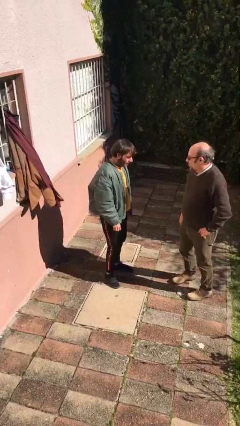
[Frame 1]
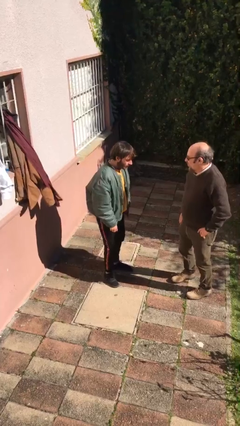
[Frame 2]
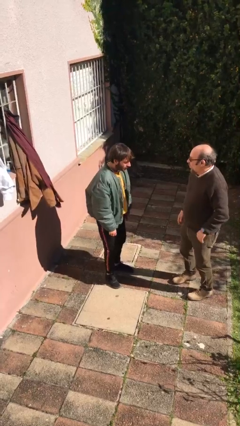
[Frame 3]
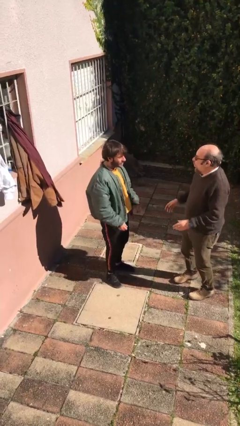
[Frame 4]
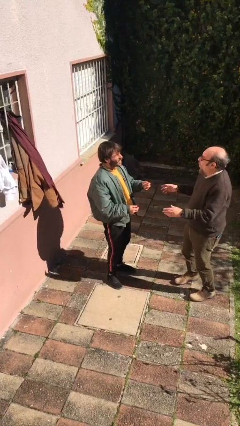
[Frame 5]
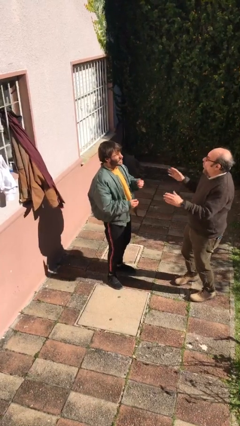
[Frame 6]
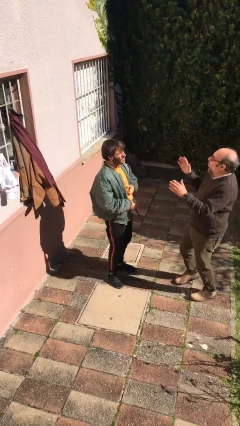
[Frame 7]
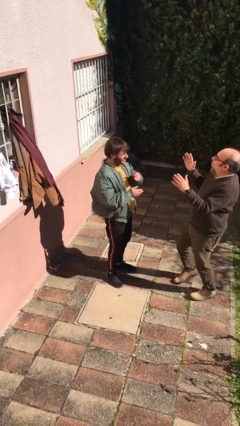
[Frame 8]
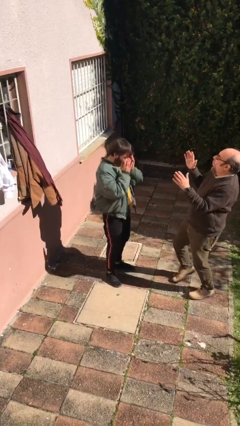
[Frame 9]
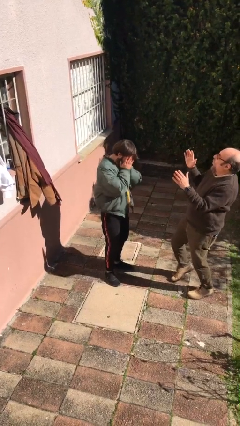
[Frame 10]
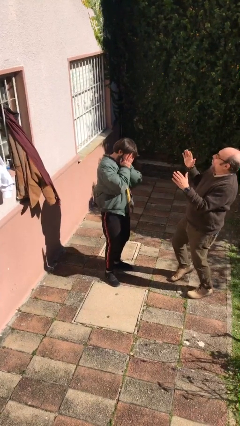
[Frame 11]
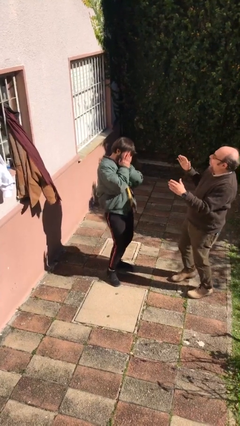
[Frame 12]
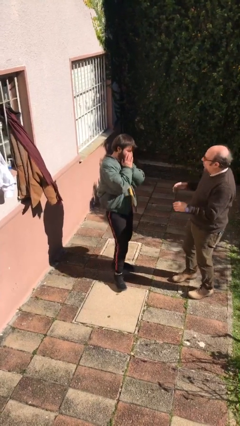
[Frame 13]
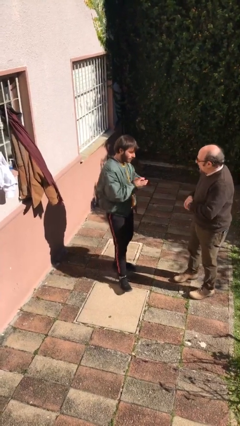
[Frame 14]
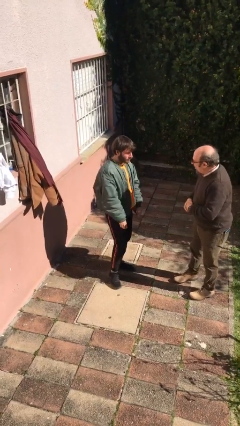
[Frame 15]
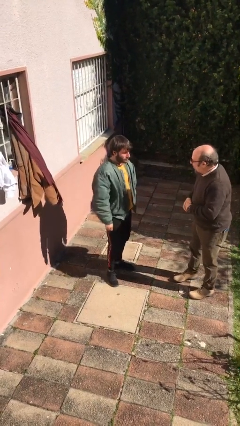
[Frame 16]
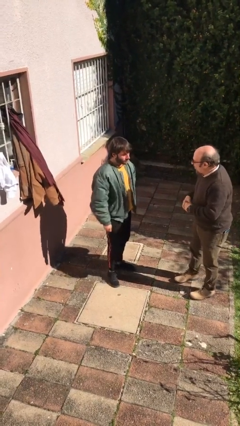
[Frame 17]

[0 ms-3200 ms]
person laughs with person

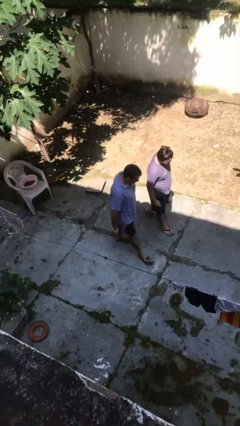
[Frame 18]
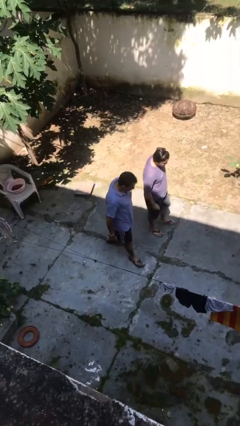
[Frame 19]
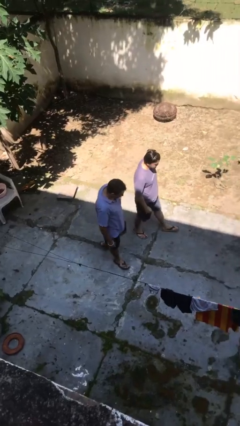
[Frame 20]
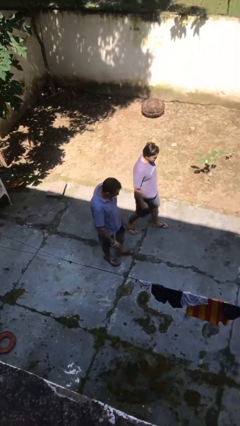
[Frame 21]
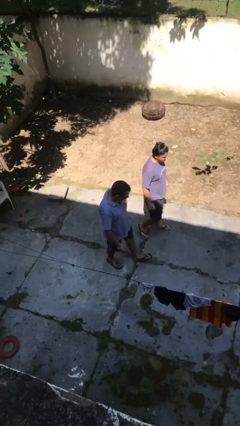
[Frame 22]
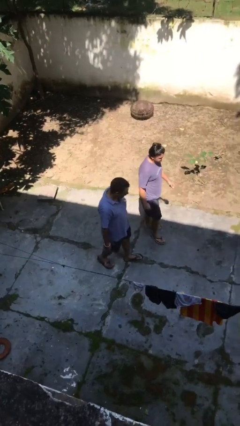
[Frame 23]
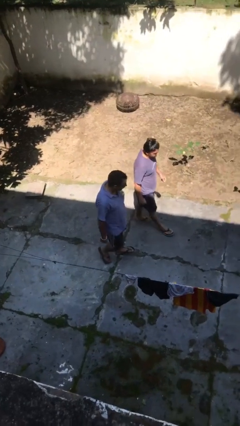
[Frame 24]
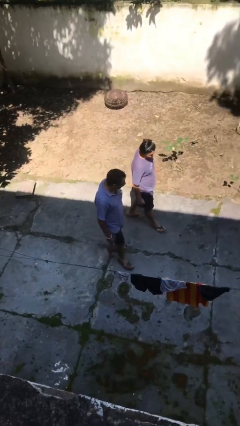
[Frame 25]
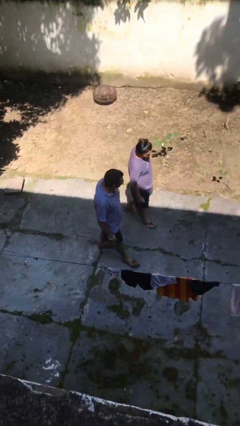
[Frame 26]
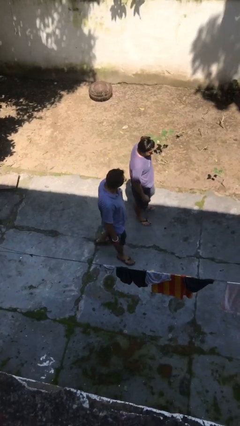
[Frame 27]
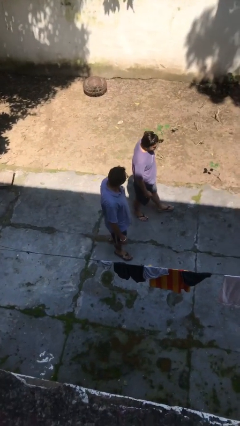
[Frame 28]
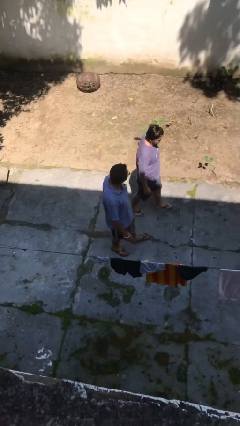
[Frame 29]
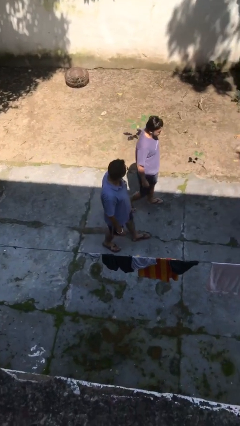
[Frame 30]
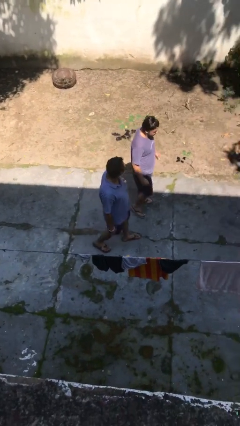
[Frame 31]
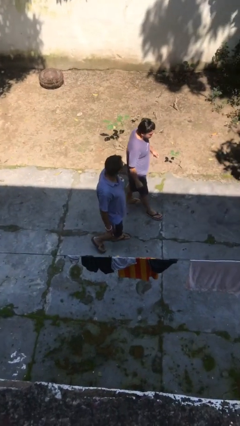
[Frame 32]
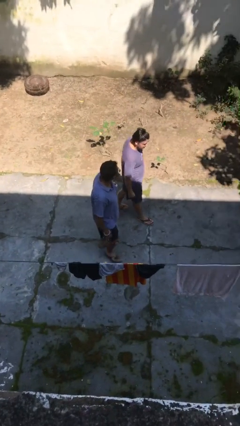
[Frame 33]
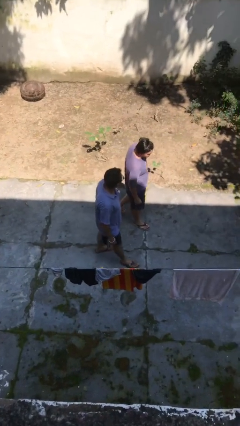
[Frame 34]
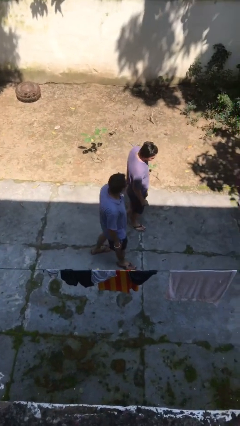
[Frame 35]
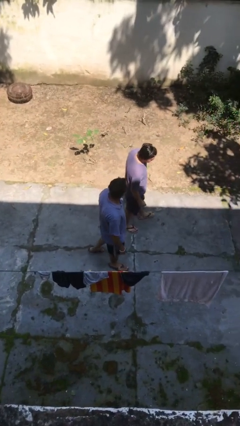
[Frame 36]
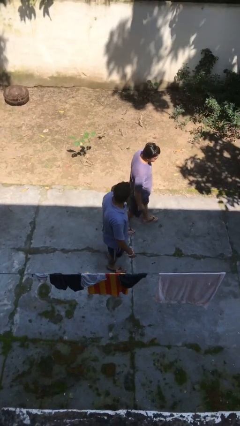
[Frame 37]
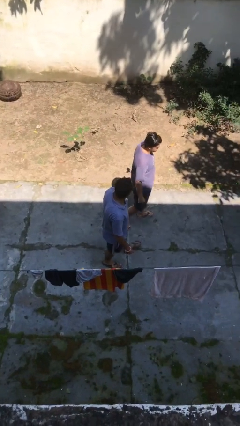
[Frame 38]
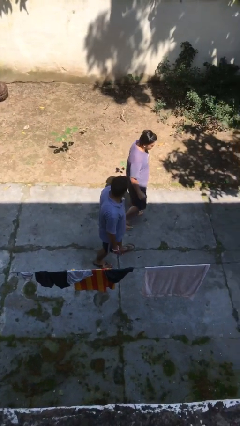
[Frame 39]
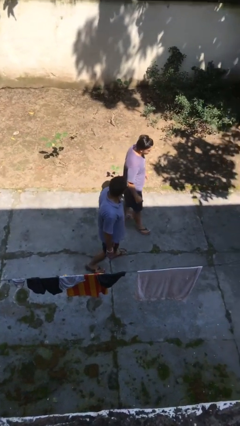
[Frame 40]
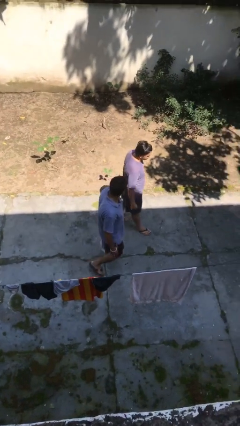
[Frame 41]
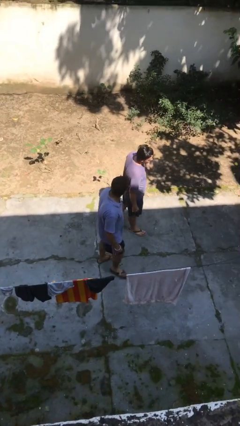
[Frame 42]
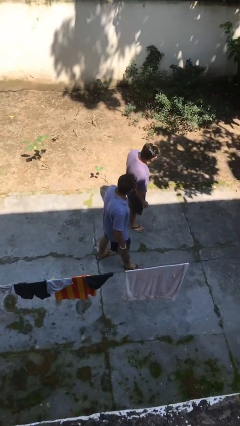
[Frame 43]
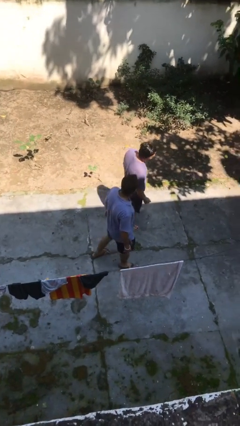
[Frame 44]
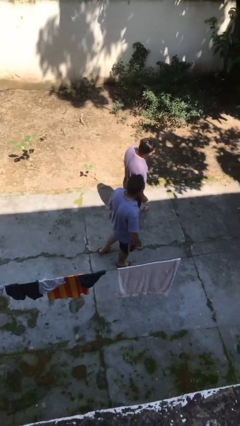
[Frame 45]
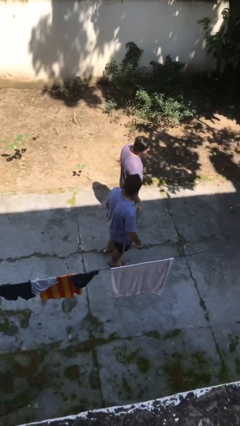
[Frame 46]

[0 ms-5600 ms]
person talks to person

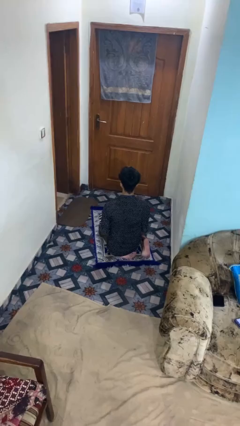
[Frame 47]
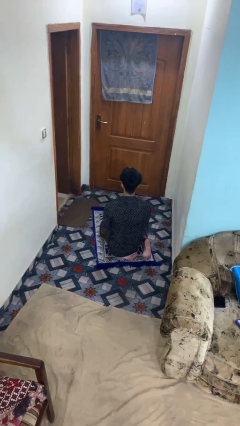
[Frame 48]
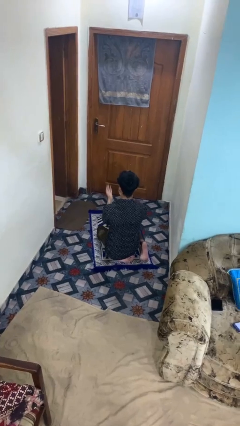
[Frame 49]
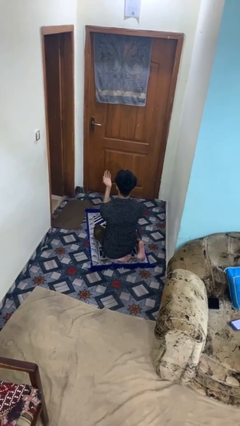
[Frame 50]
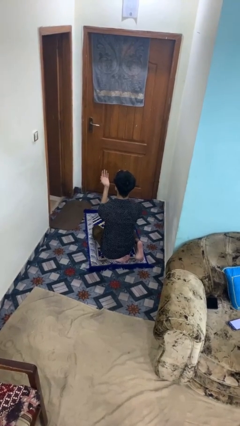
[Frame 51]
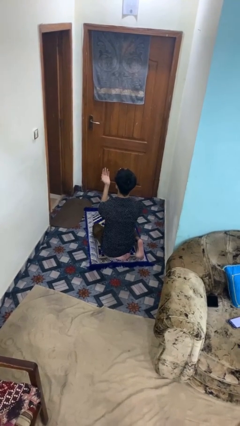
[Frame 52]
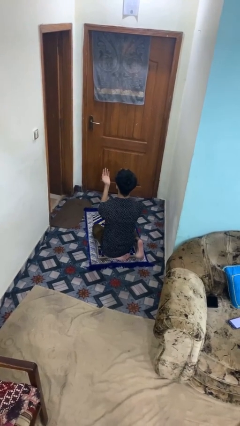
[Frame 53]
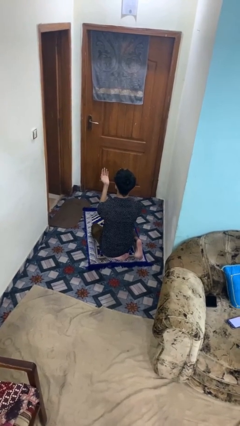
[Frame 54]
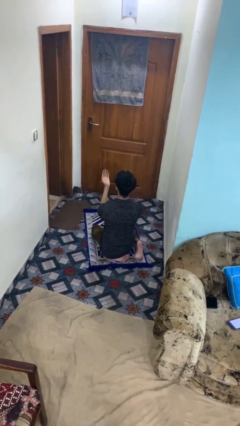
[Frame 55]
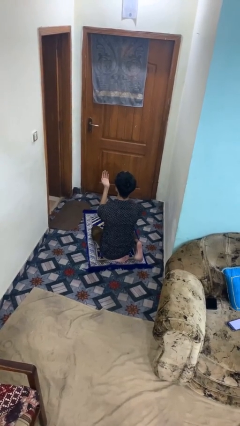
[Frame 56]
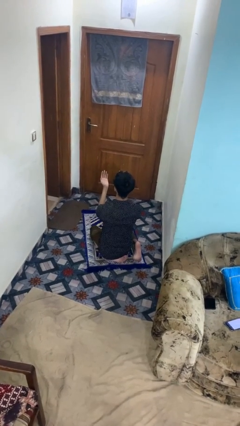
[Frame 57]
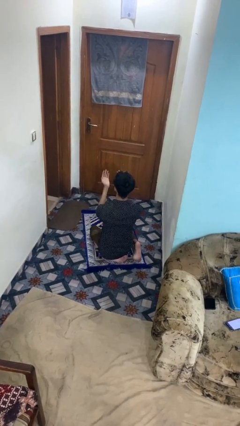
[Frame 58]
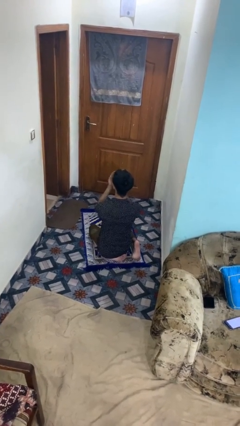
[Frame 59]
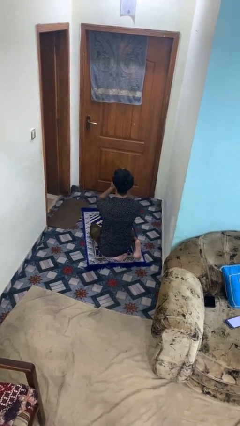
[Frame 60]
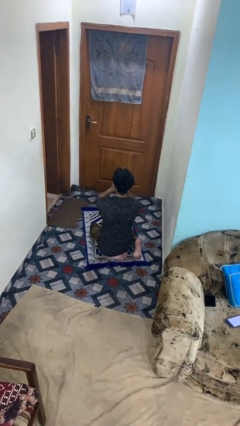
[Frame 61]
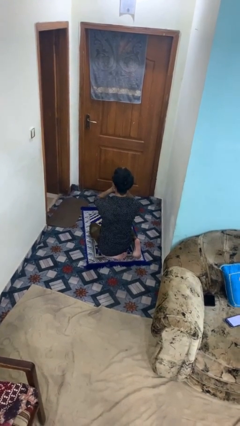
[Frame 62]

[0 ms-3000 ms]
person prays

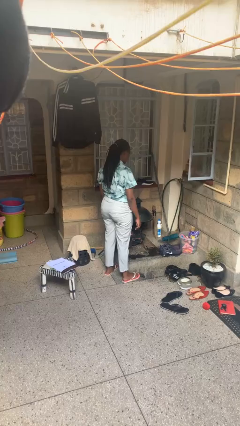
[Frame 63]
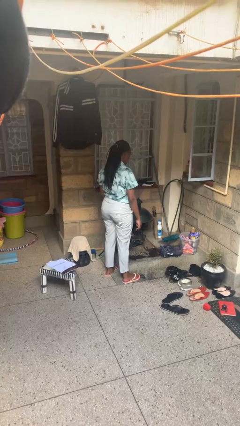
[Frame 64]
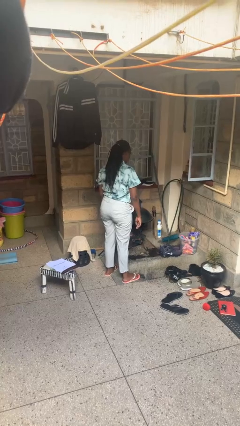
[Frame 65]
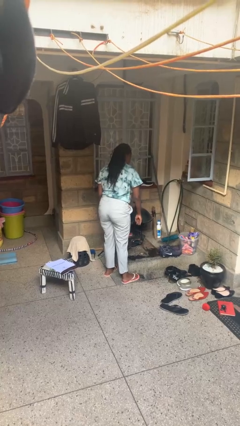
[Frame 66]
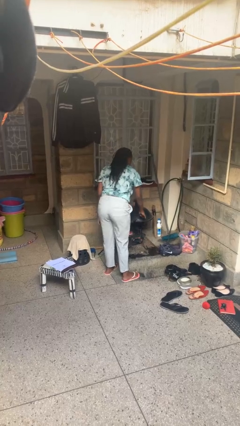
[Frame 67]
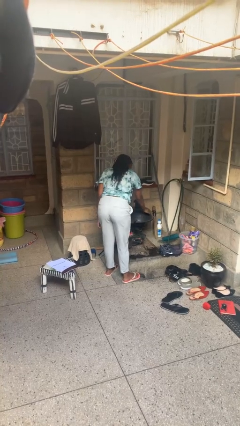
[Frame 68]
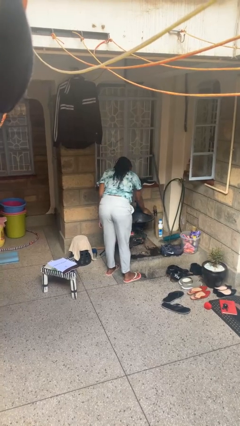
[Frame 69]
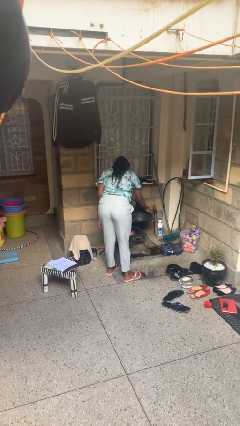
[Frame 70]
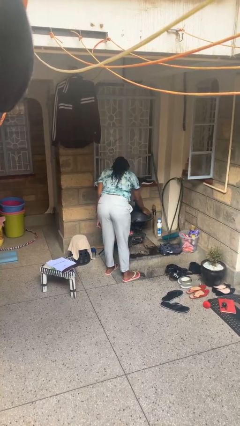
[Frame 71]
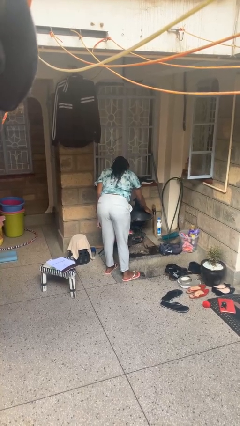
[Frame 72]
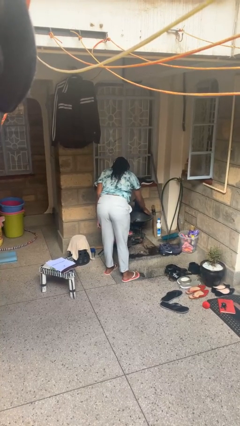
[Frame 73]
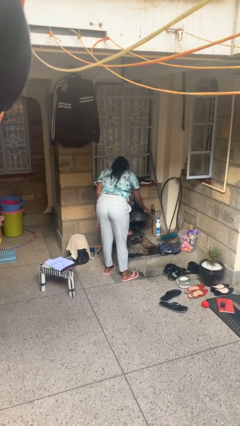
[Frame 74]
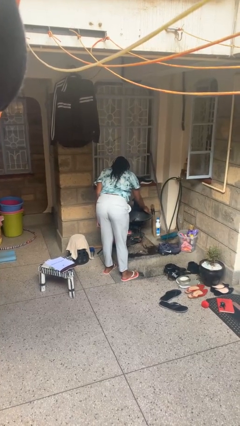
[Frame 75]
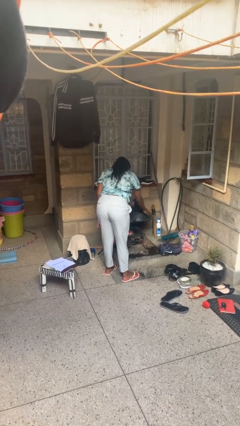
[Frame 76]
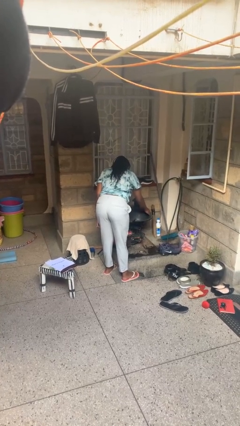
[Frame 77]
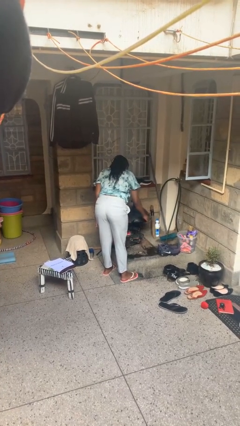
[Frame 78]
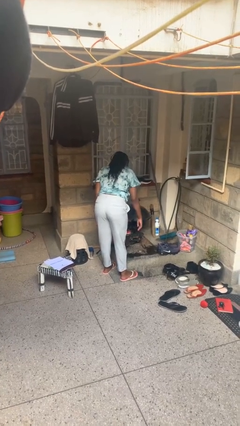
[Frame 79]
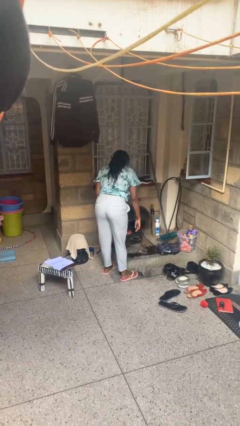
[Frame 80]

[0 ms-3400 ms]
person taps object with finger

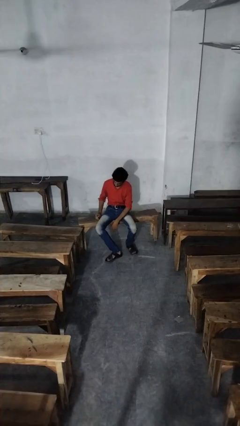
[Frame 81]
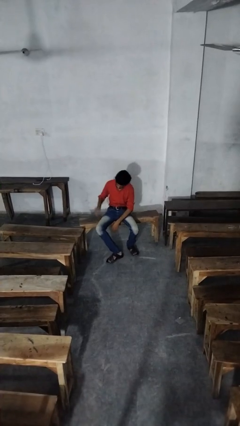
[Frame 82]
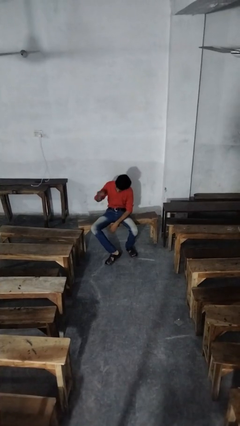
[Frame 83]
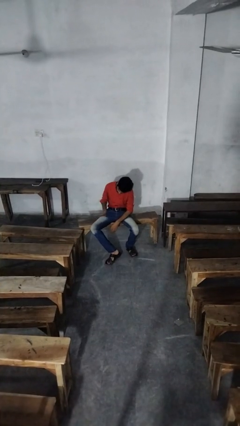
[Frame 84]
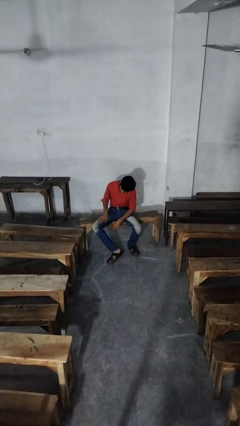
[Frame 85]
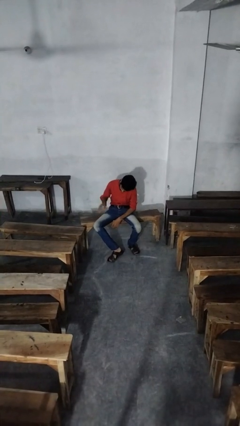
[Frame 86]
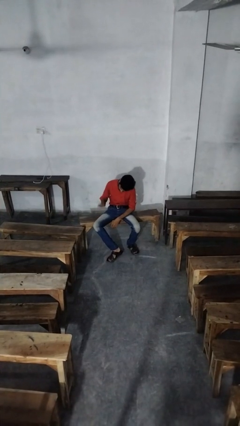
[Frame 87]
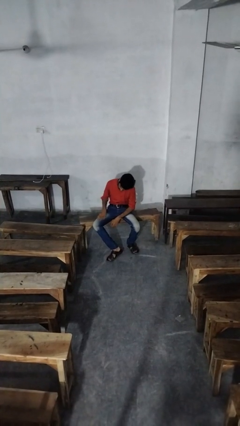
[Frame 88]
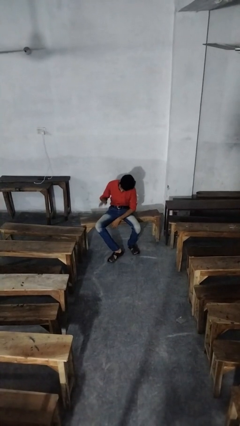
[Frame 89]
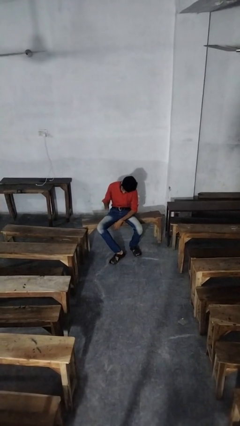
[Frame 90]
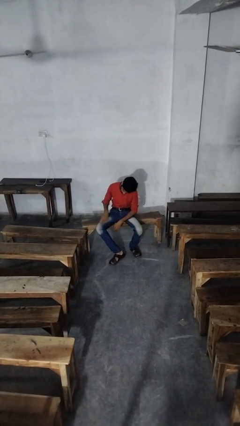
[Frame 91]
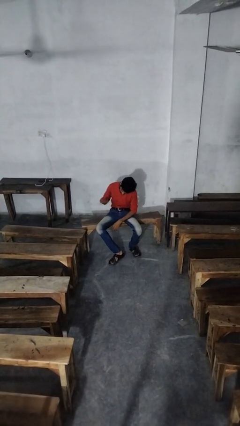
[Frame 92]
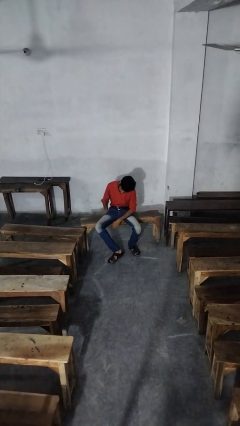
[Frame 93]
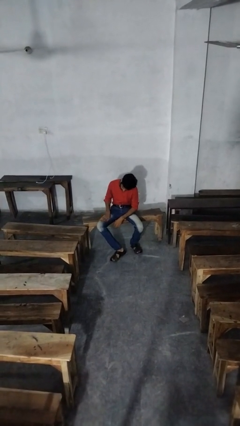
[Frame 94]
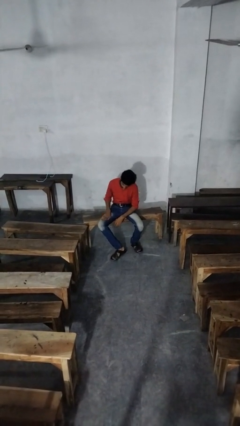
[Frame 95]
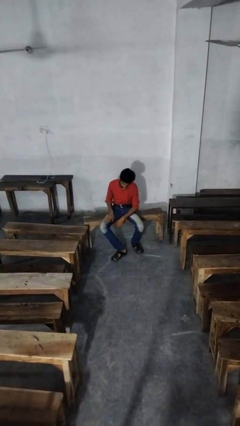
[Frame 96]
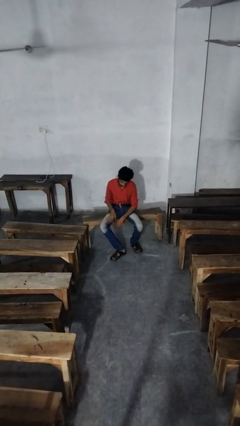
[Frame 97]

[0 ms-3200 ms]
person slaps hands on thighs
